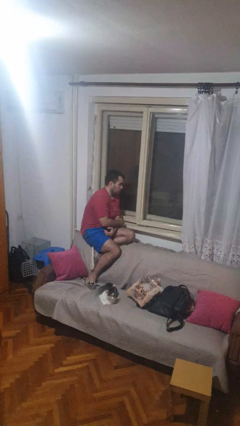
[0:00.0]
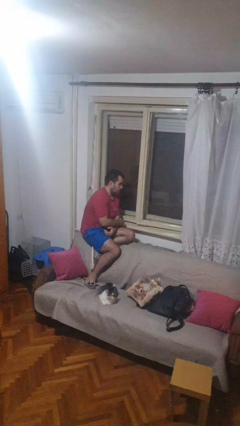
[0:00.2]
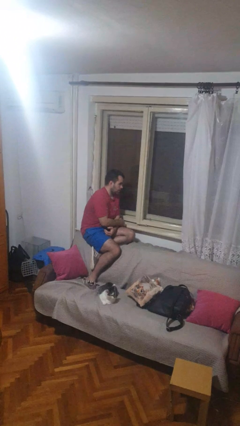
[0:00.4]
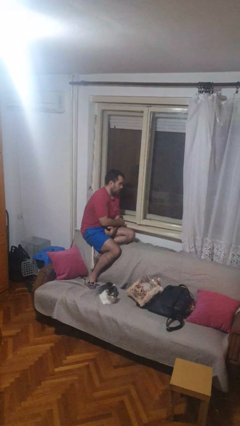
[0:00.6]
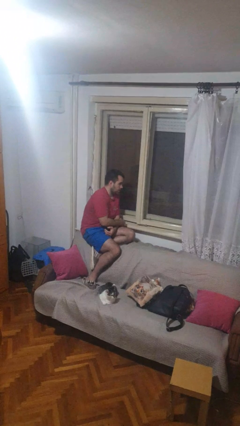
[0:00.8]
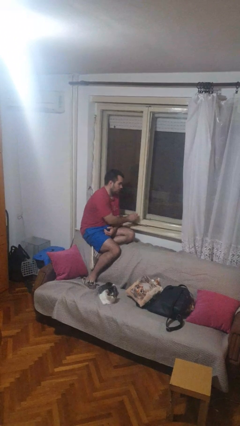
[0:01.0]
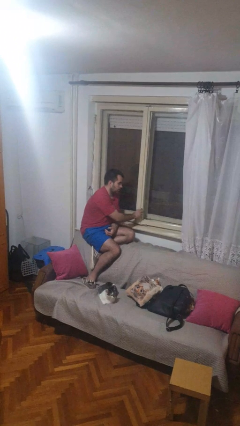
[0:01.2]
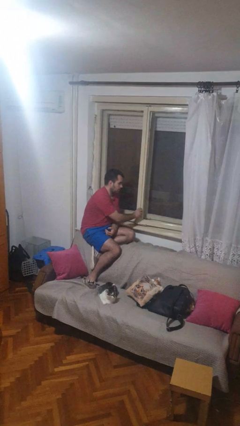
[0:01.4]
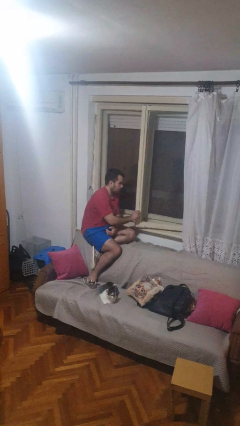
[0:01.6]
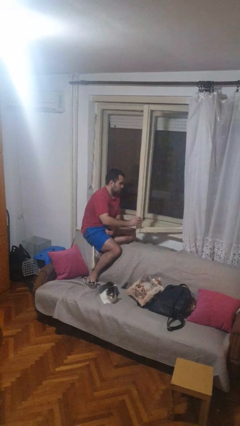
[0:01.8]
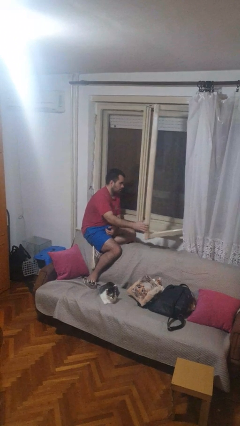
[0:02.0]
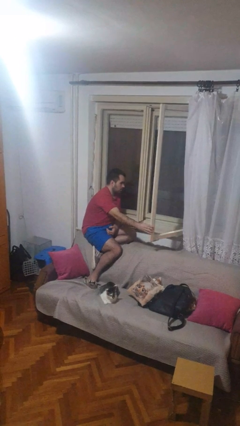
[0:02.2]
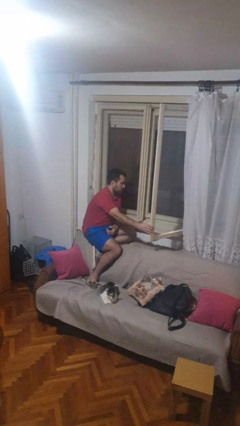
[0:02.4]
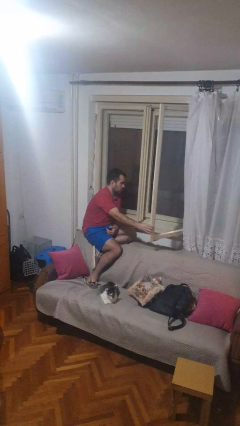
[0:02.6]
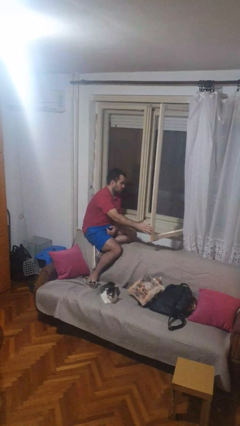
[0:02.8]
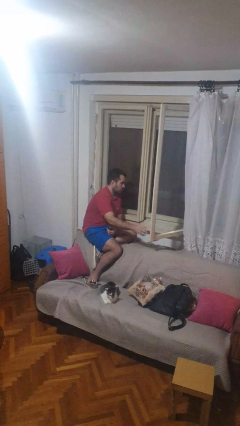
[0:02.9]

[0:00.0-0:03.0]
person opens home window

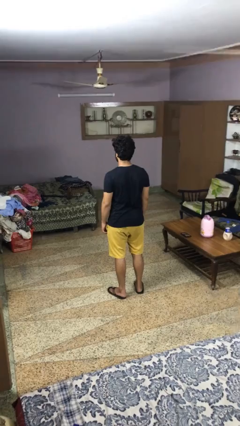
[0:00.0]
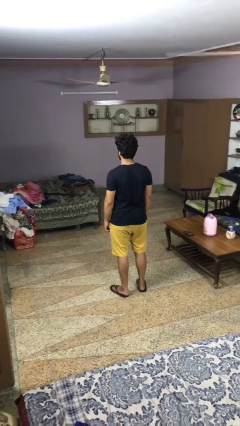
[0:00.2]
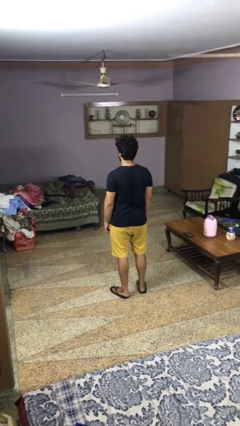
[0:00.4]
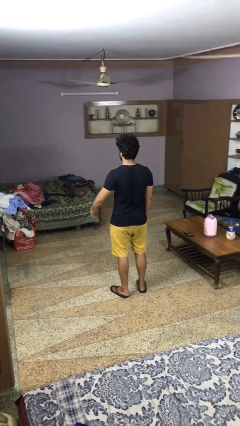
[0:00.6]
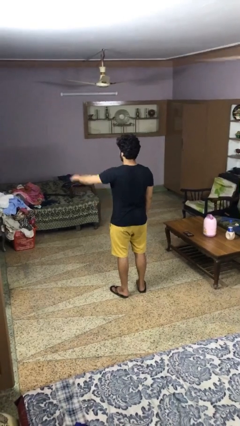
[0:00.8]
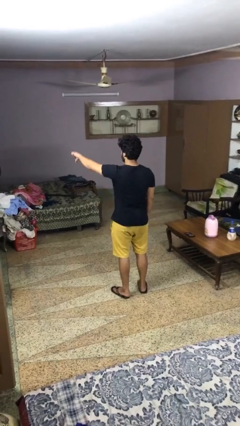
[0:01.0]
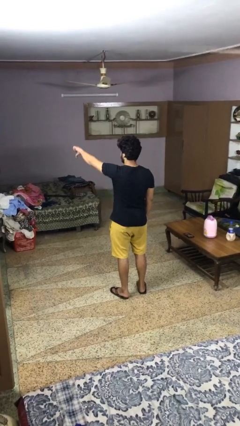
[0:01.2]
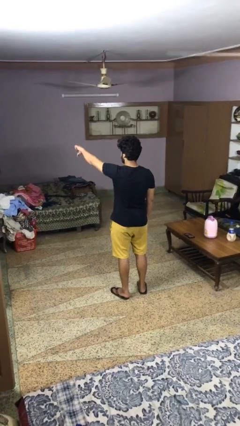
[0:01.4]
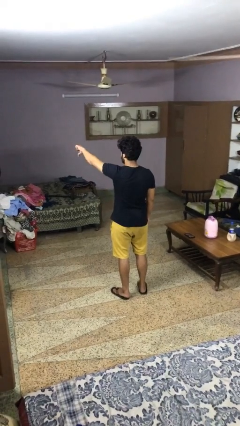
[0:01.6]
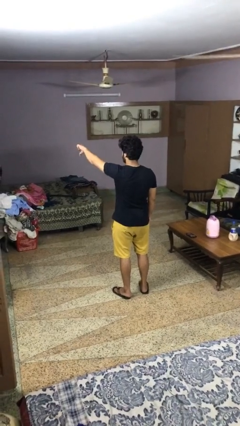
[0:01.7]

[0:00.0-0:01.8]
person gestures thumbs down

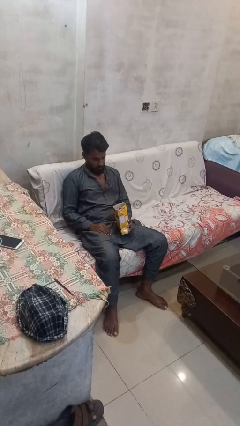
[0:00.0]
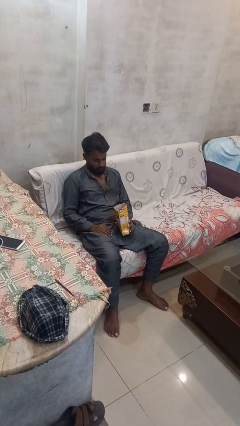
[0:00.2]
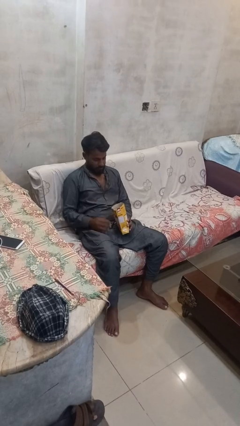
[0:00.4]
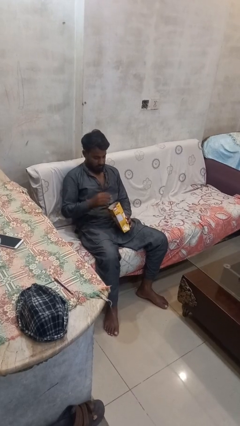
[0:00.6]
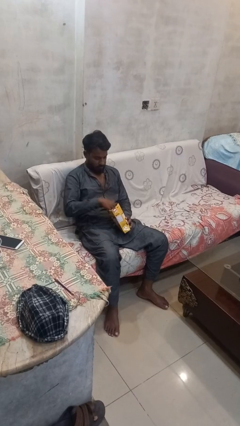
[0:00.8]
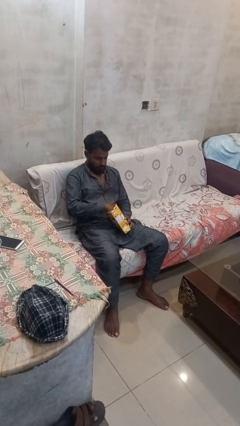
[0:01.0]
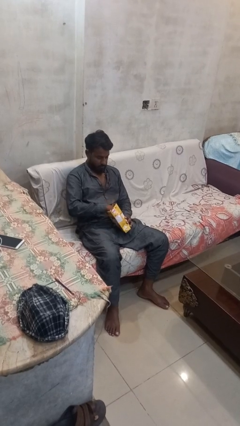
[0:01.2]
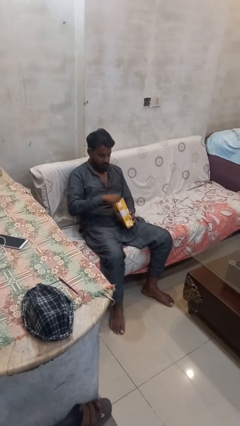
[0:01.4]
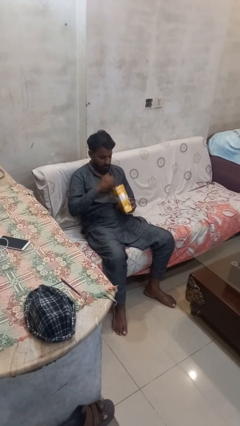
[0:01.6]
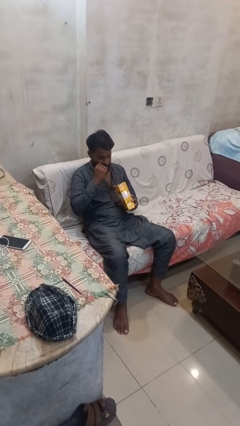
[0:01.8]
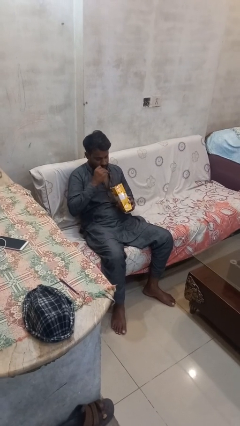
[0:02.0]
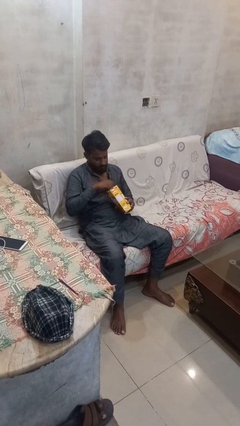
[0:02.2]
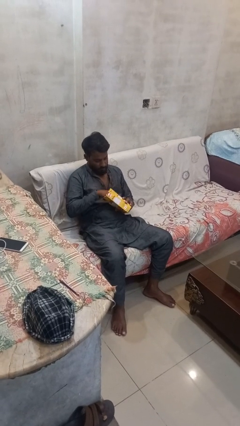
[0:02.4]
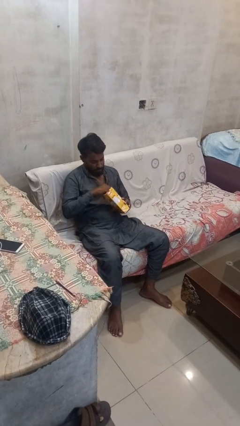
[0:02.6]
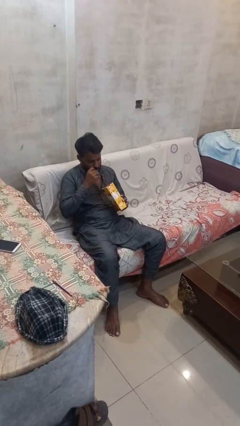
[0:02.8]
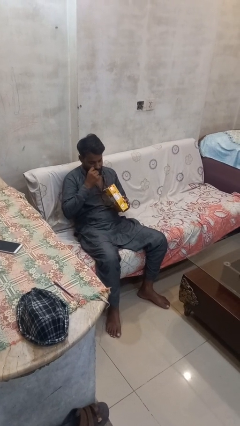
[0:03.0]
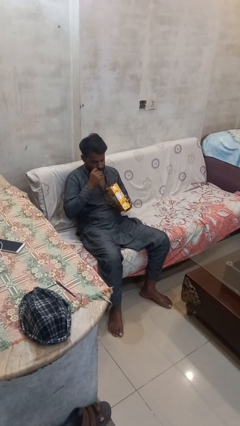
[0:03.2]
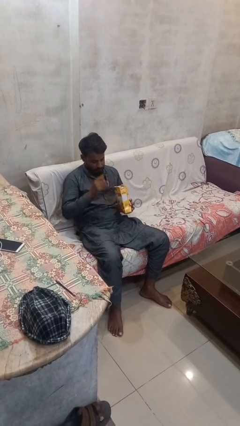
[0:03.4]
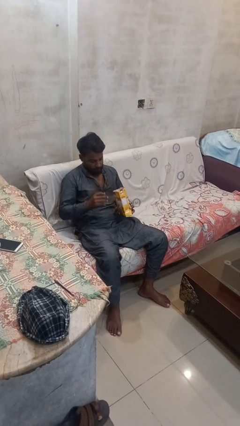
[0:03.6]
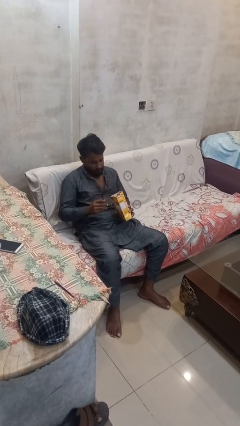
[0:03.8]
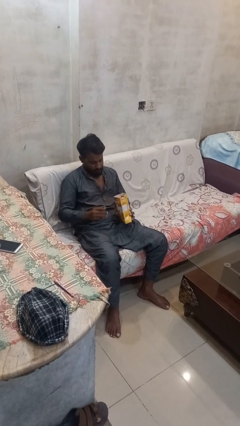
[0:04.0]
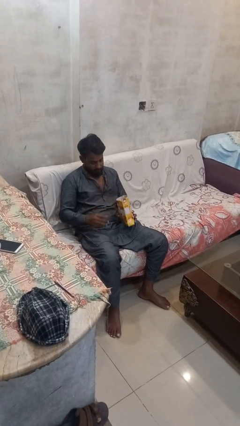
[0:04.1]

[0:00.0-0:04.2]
person eats snack from bag

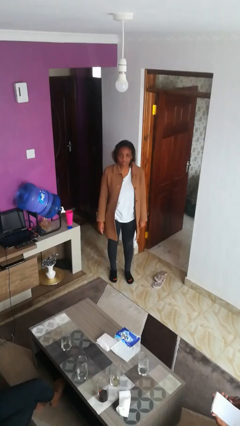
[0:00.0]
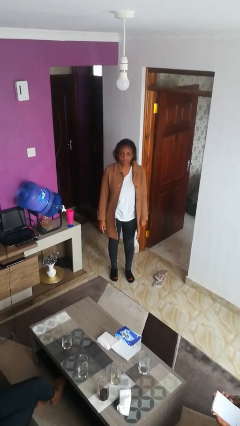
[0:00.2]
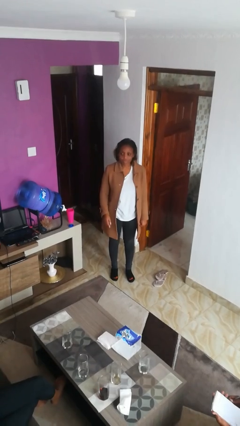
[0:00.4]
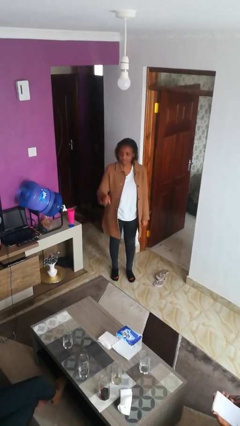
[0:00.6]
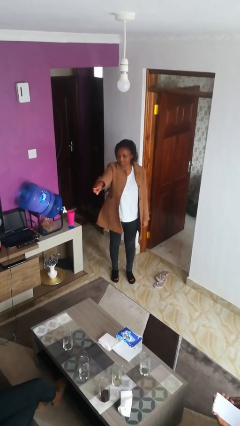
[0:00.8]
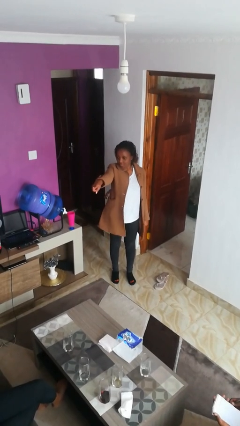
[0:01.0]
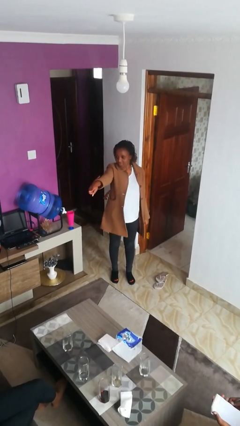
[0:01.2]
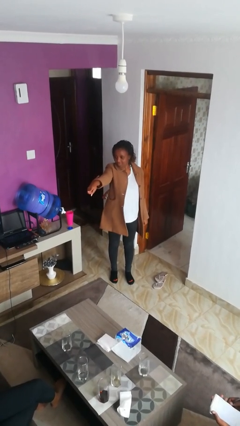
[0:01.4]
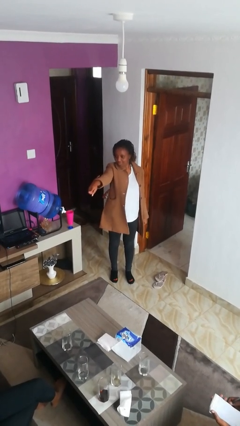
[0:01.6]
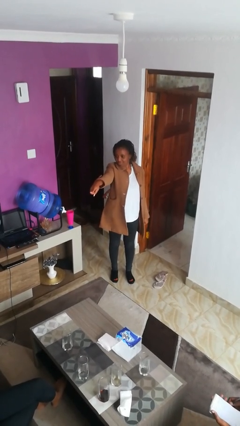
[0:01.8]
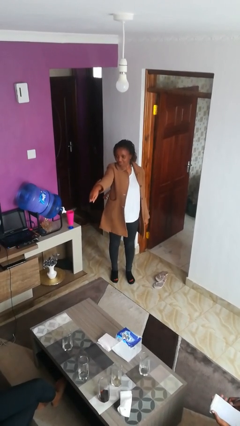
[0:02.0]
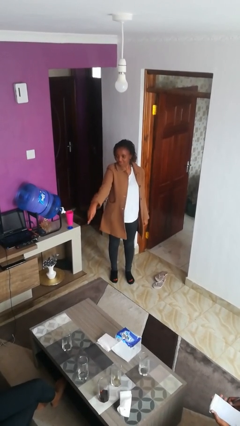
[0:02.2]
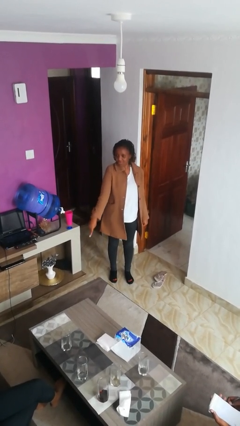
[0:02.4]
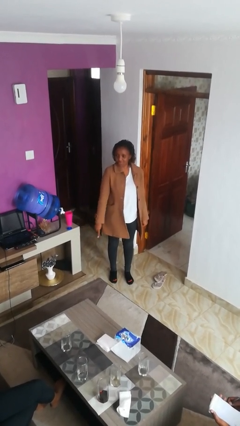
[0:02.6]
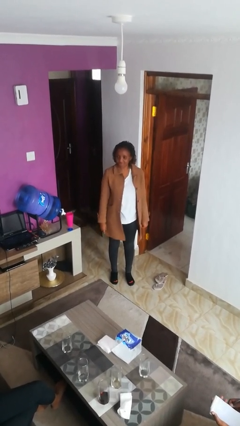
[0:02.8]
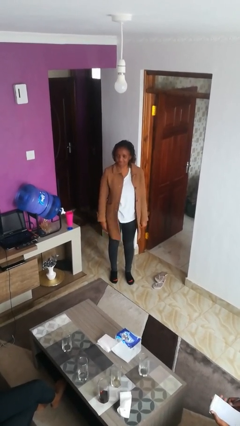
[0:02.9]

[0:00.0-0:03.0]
person points at person

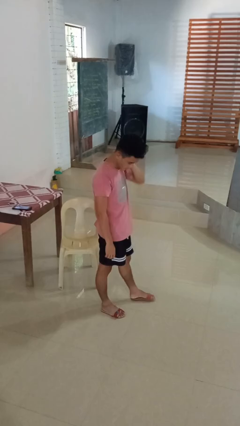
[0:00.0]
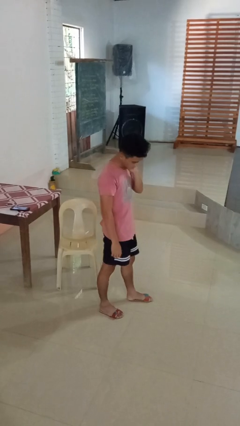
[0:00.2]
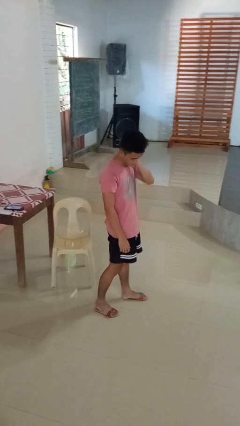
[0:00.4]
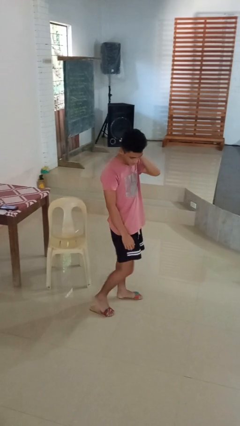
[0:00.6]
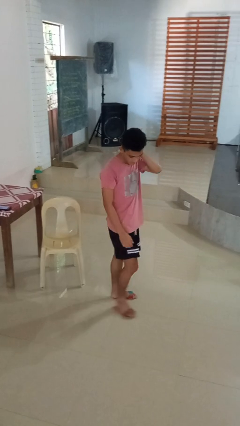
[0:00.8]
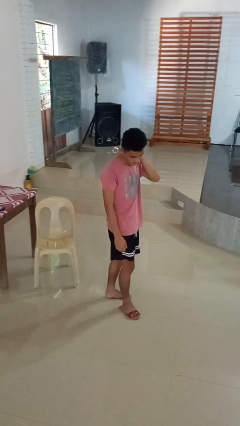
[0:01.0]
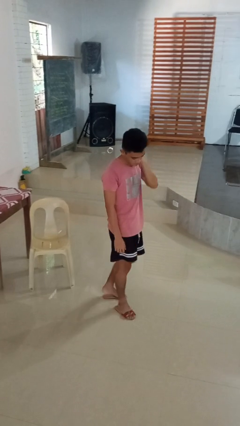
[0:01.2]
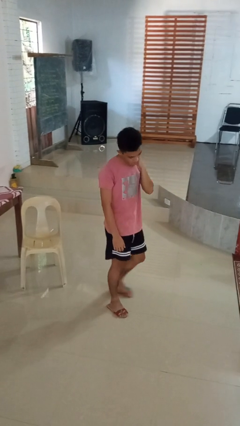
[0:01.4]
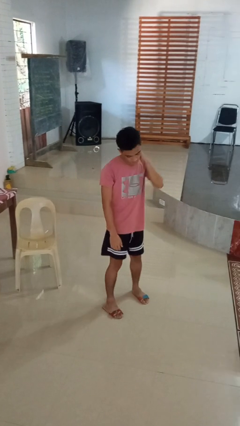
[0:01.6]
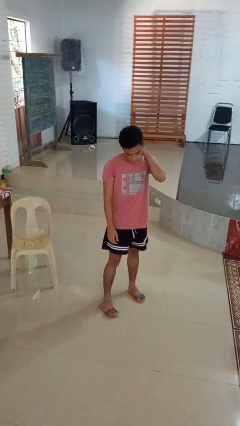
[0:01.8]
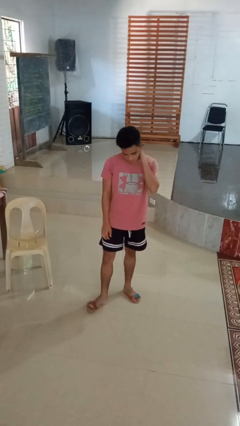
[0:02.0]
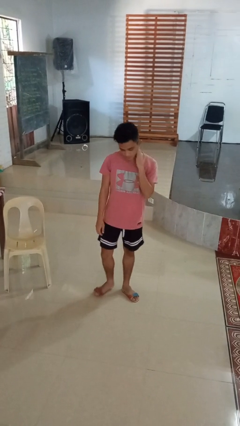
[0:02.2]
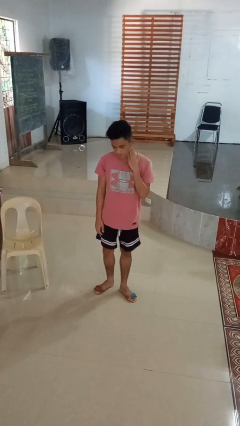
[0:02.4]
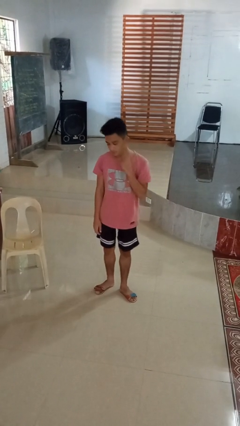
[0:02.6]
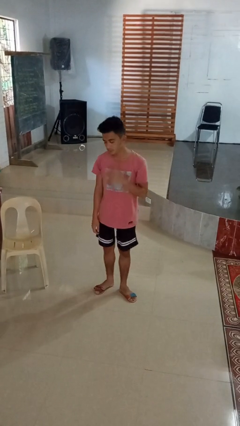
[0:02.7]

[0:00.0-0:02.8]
person rubs neck

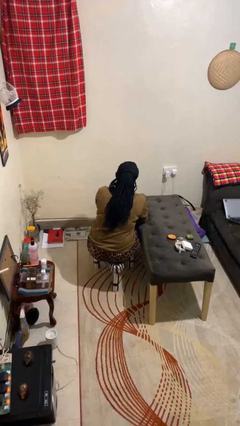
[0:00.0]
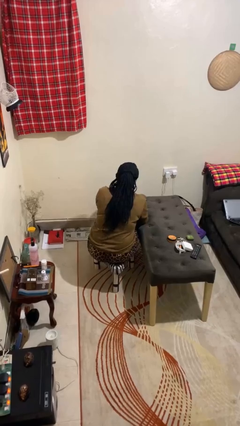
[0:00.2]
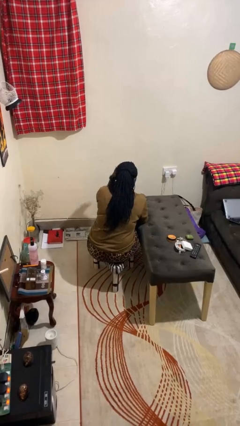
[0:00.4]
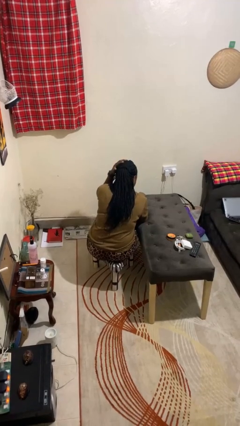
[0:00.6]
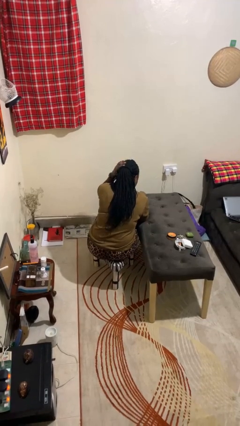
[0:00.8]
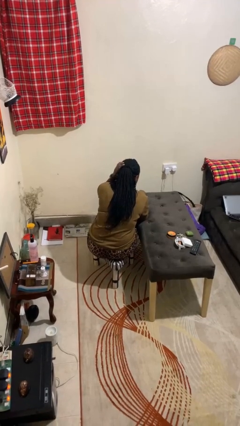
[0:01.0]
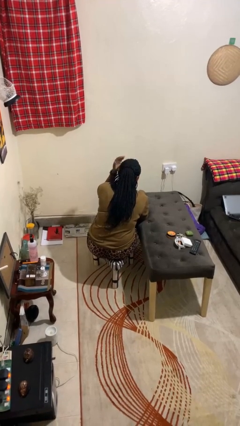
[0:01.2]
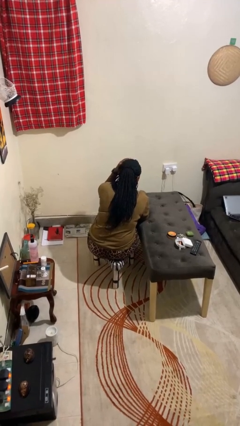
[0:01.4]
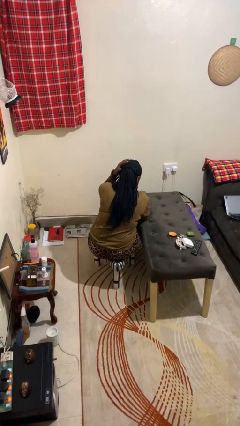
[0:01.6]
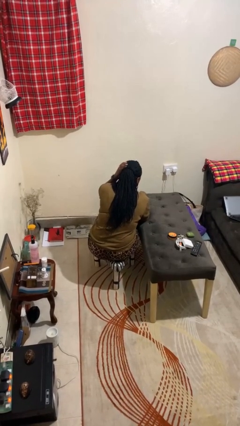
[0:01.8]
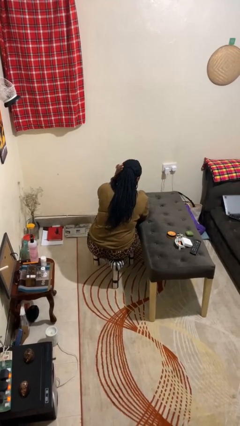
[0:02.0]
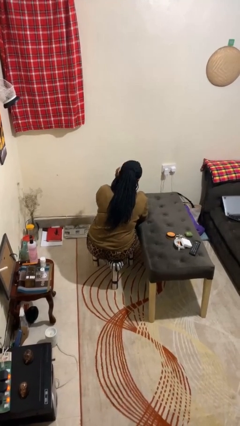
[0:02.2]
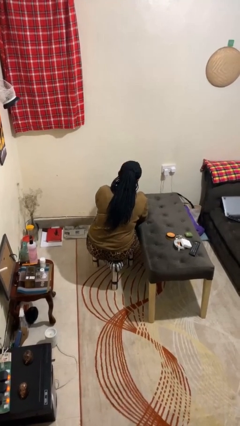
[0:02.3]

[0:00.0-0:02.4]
person strokes hair
